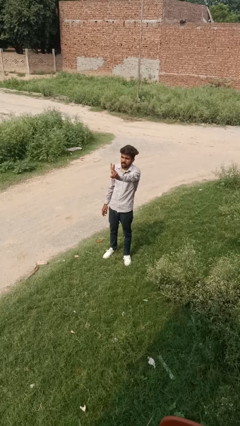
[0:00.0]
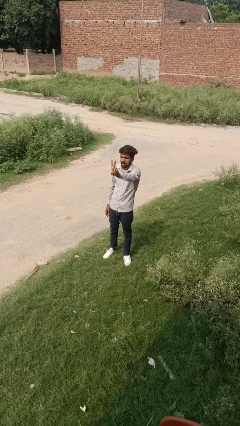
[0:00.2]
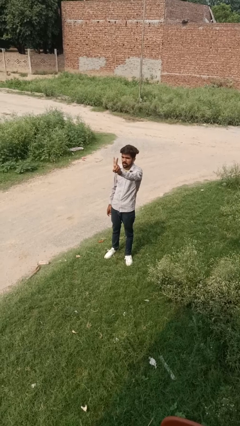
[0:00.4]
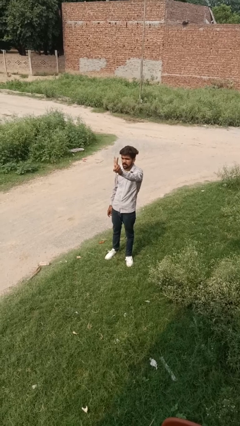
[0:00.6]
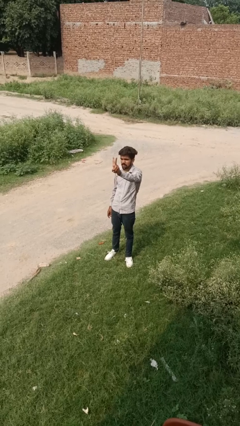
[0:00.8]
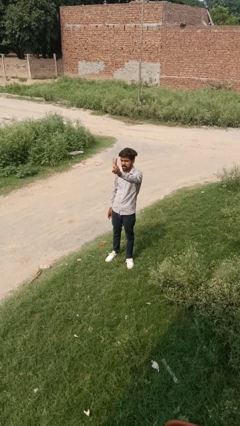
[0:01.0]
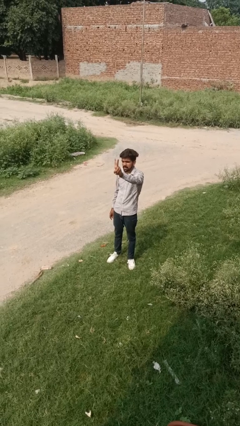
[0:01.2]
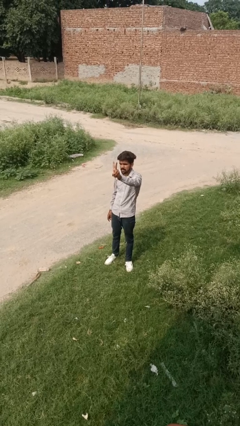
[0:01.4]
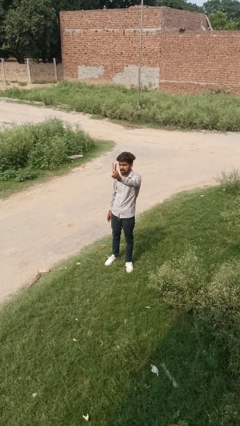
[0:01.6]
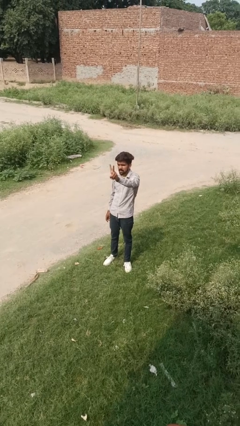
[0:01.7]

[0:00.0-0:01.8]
person gestures peace

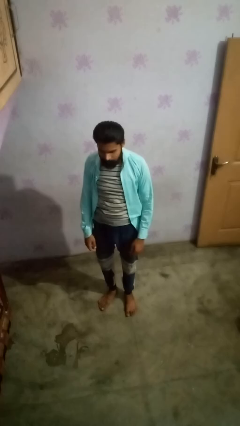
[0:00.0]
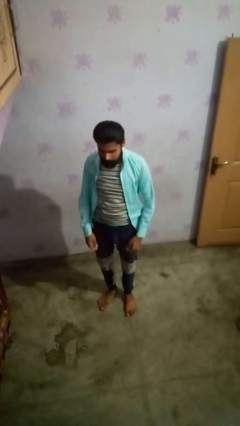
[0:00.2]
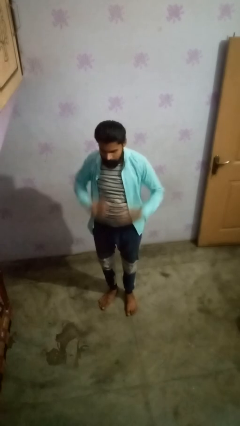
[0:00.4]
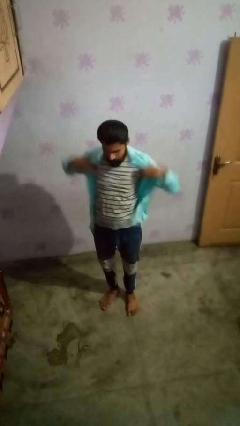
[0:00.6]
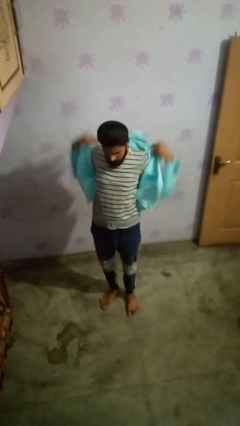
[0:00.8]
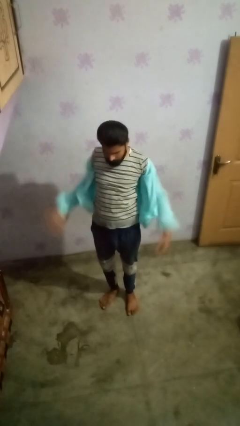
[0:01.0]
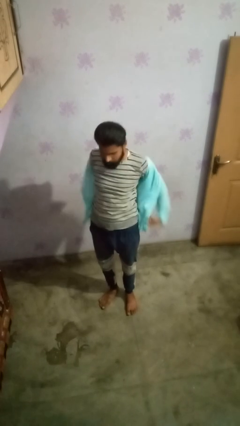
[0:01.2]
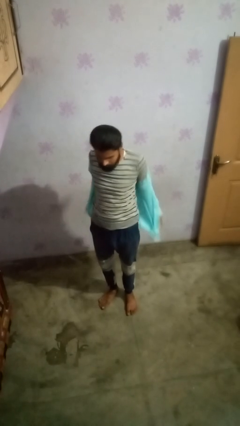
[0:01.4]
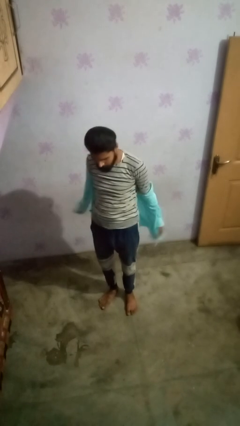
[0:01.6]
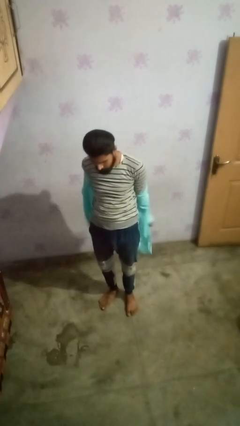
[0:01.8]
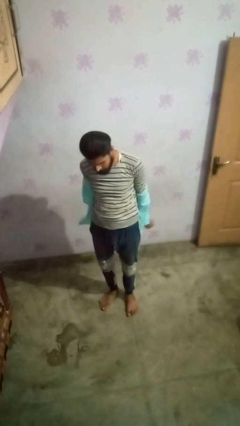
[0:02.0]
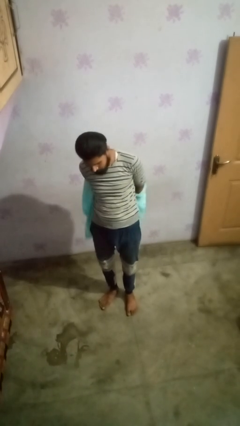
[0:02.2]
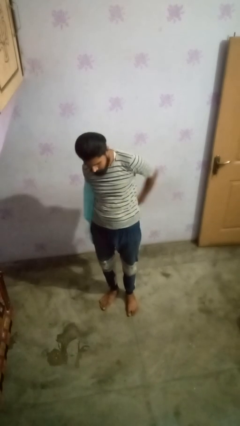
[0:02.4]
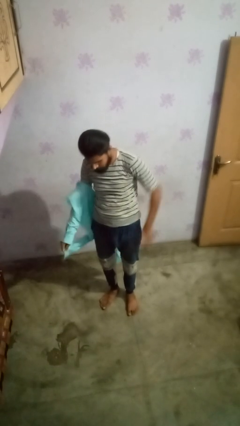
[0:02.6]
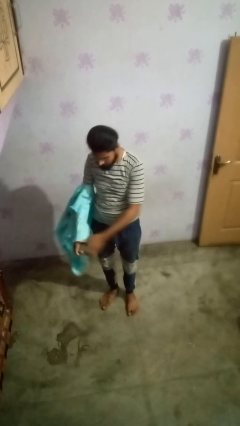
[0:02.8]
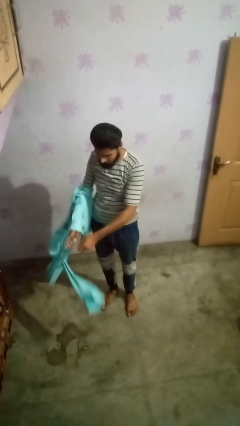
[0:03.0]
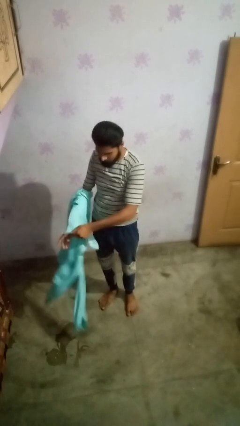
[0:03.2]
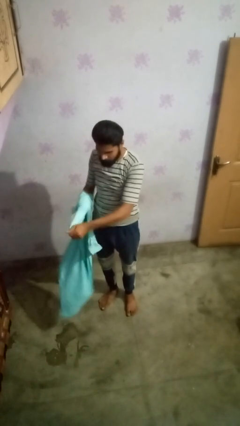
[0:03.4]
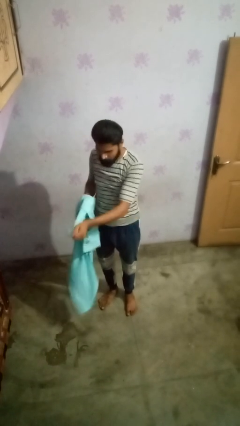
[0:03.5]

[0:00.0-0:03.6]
person takes off shirt

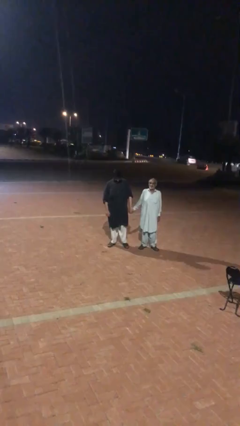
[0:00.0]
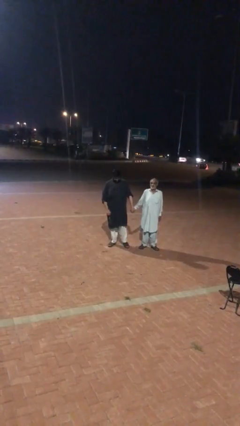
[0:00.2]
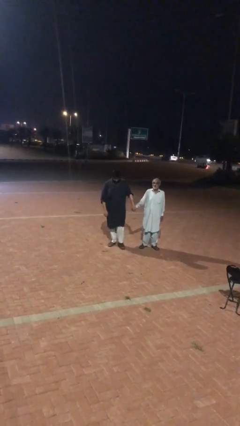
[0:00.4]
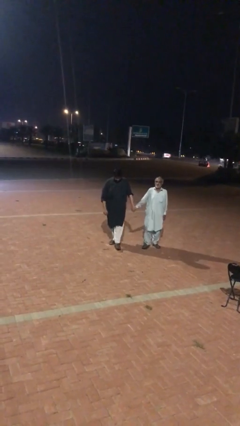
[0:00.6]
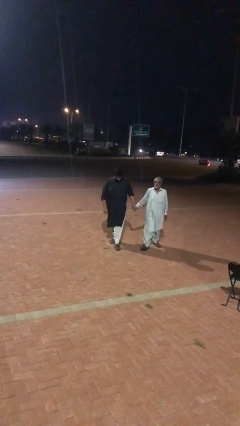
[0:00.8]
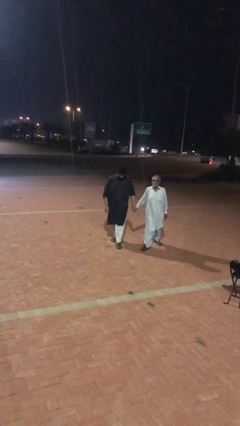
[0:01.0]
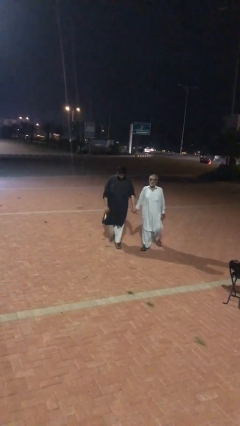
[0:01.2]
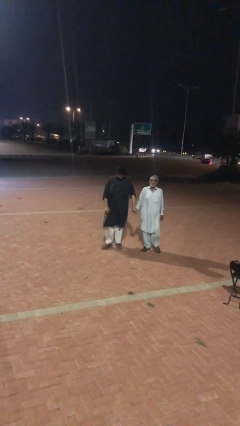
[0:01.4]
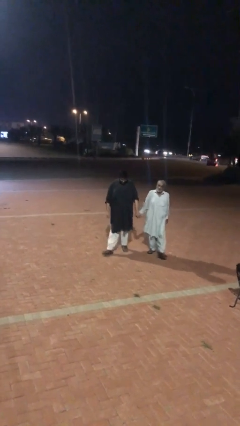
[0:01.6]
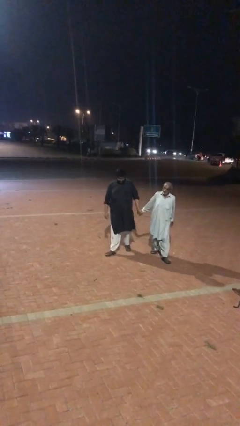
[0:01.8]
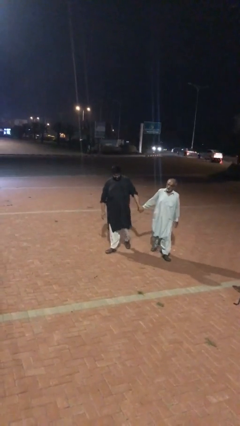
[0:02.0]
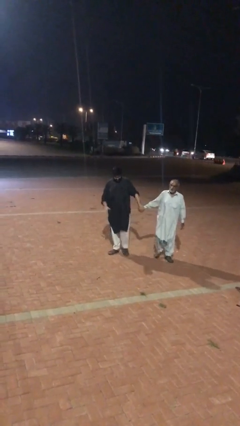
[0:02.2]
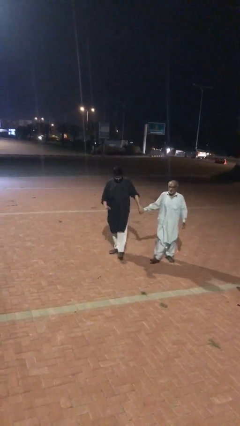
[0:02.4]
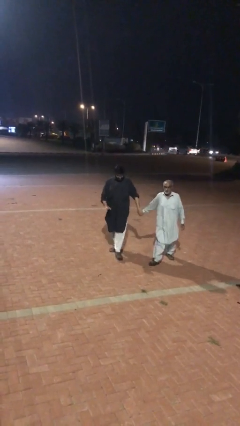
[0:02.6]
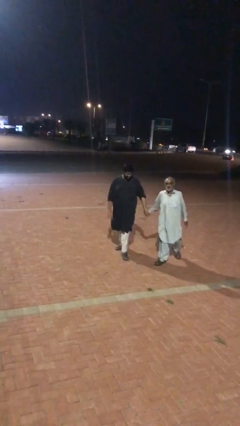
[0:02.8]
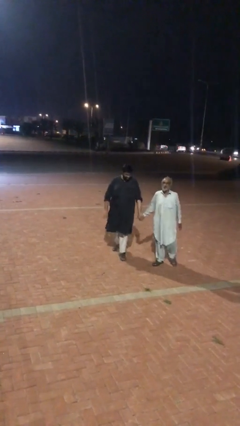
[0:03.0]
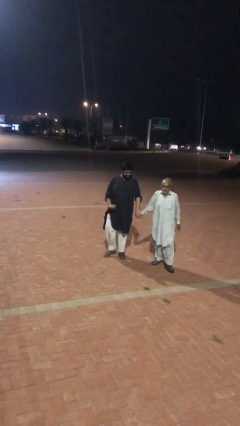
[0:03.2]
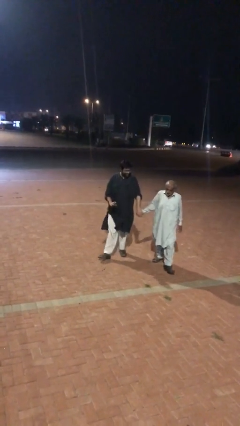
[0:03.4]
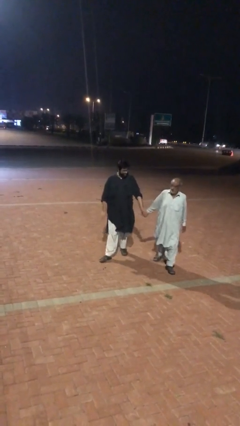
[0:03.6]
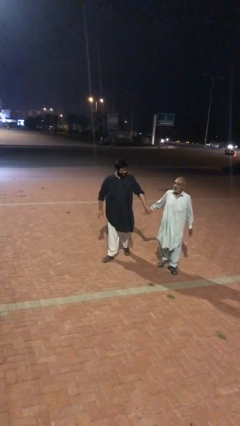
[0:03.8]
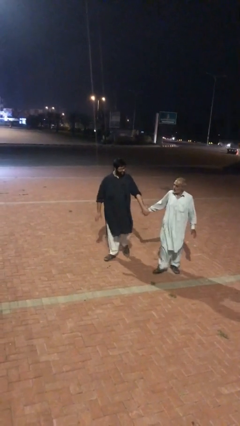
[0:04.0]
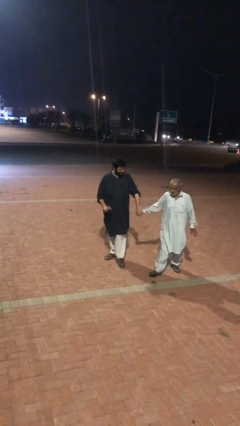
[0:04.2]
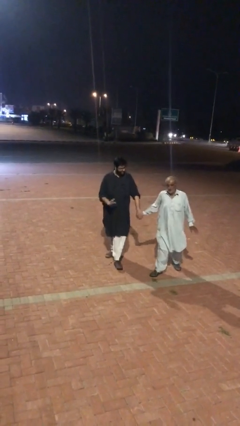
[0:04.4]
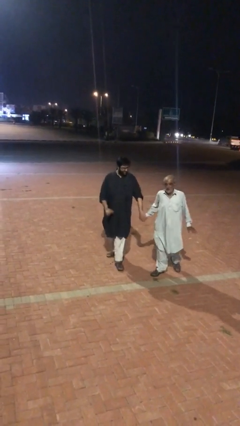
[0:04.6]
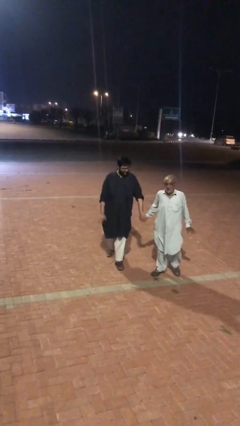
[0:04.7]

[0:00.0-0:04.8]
person holds hand

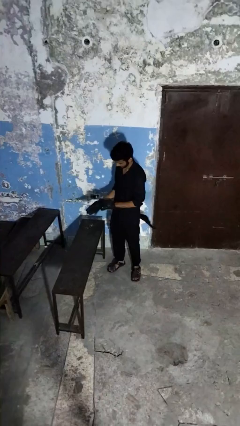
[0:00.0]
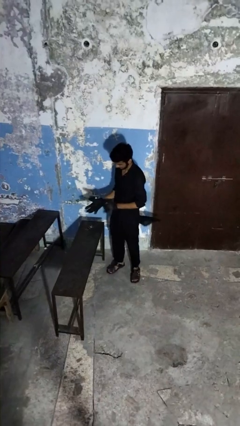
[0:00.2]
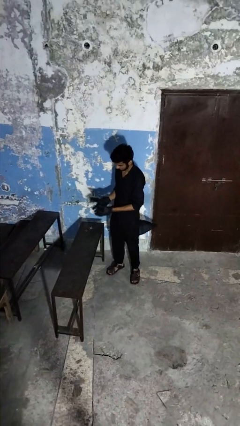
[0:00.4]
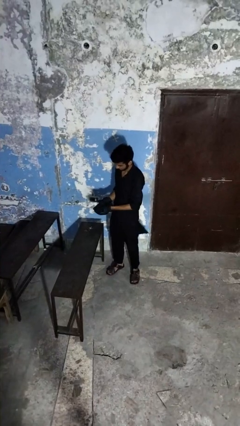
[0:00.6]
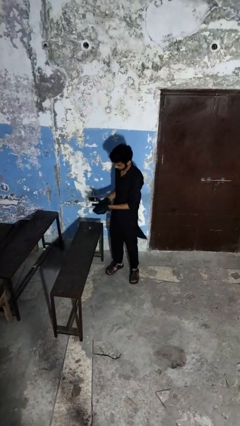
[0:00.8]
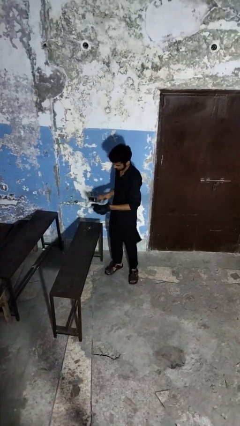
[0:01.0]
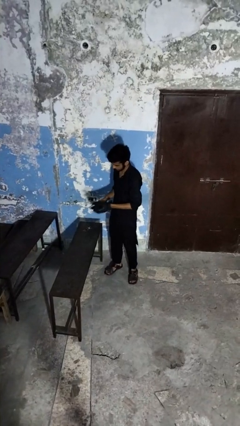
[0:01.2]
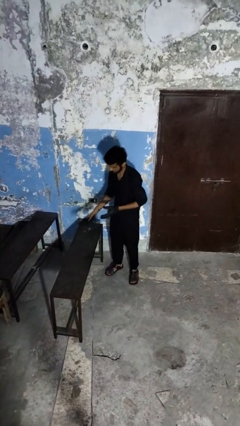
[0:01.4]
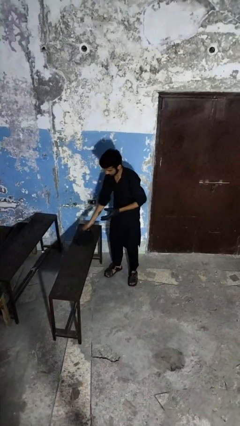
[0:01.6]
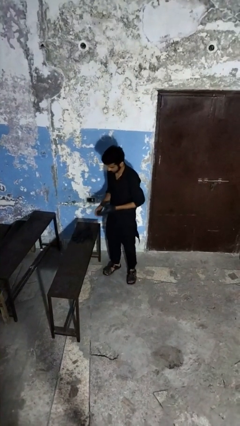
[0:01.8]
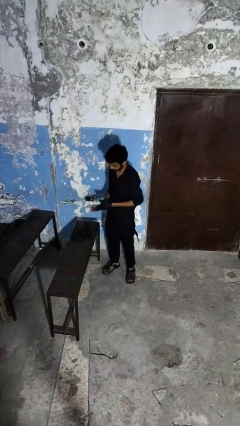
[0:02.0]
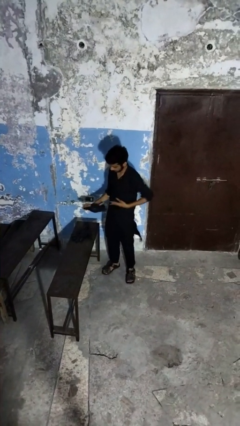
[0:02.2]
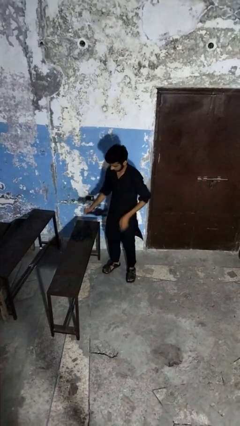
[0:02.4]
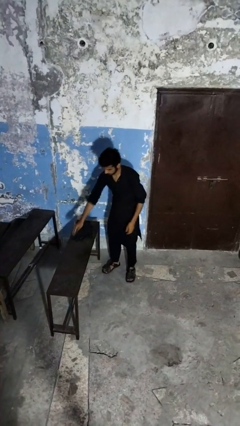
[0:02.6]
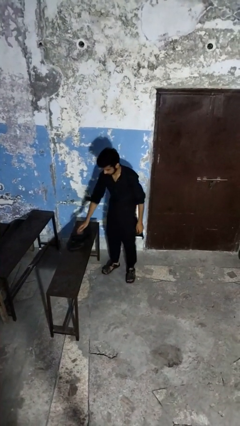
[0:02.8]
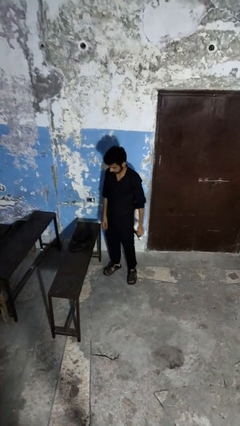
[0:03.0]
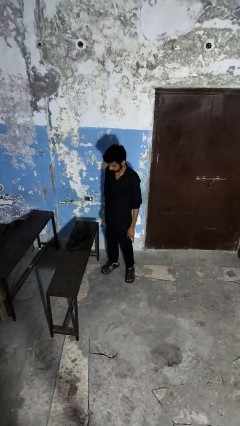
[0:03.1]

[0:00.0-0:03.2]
person takes off gloves

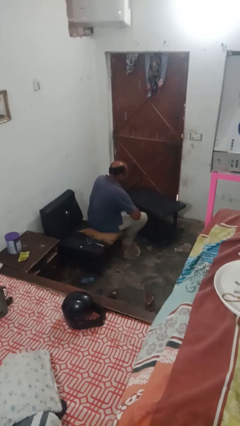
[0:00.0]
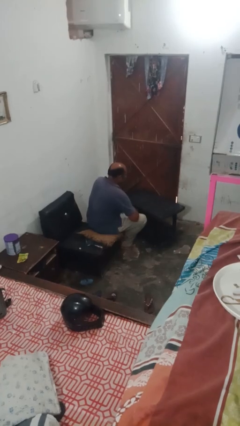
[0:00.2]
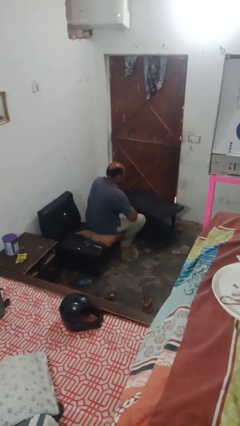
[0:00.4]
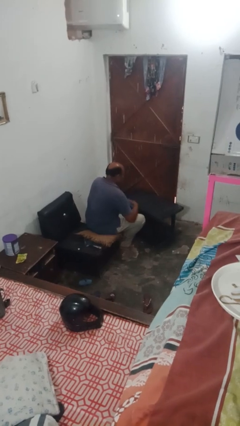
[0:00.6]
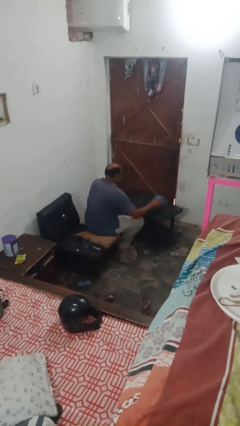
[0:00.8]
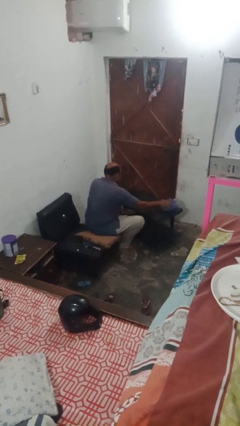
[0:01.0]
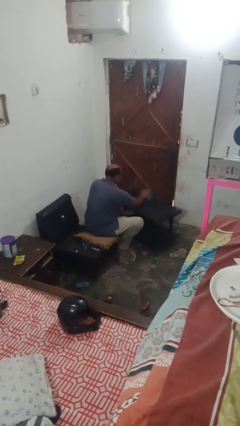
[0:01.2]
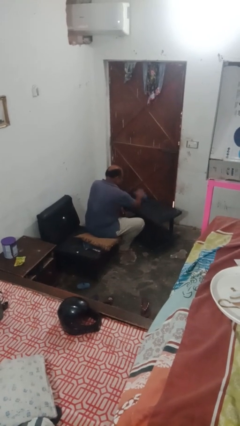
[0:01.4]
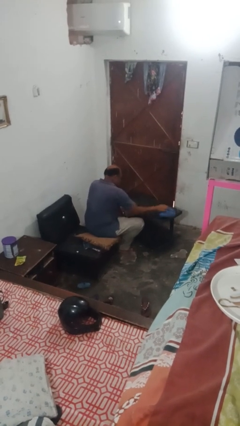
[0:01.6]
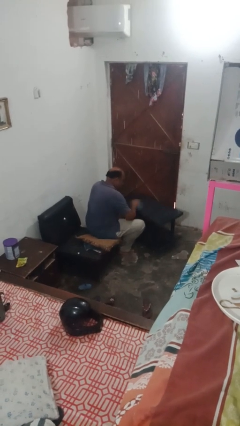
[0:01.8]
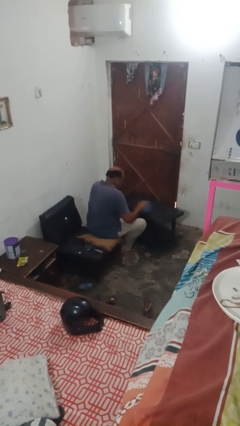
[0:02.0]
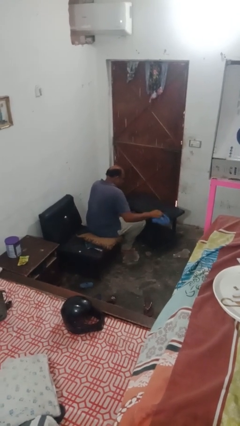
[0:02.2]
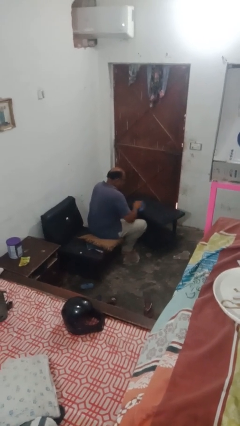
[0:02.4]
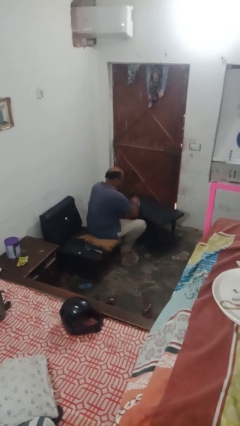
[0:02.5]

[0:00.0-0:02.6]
person cleans table with rag

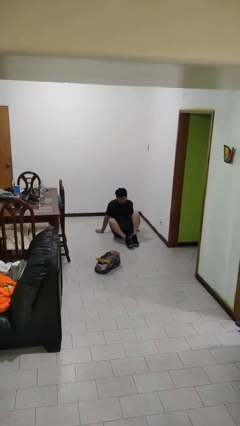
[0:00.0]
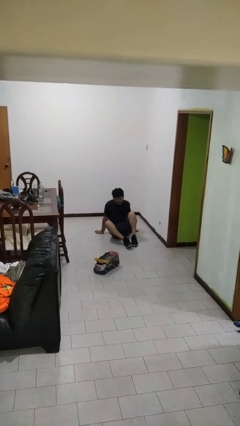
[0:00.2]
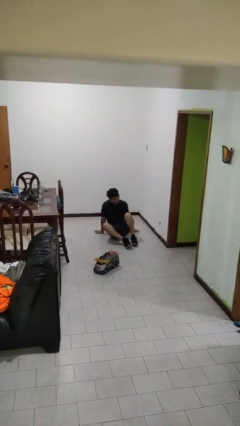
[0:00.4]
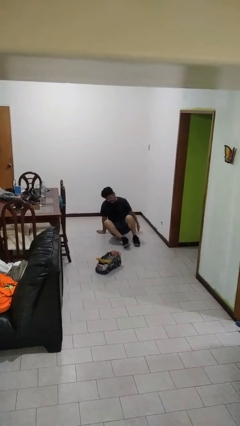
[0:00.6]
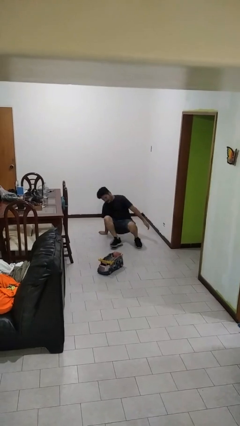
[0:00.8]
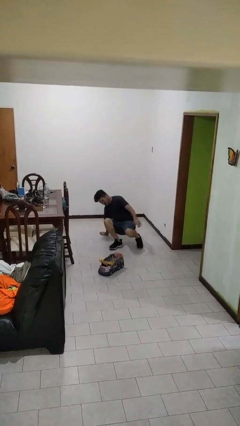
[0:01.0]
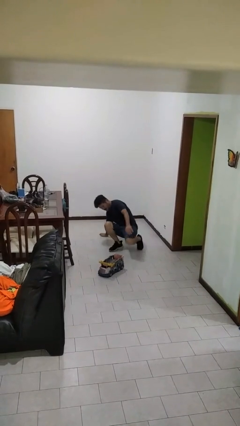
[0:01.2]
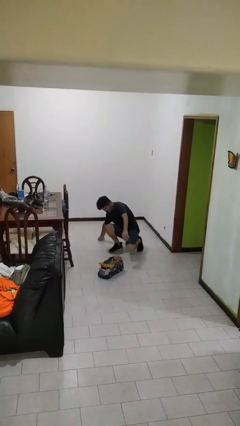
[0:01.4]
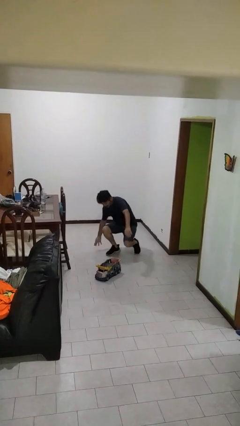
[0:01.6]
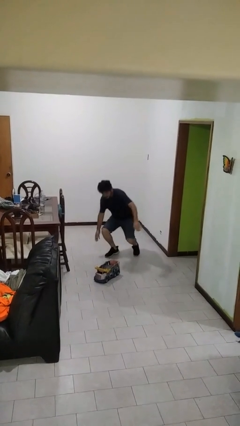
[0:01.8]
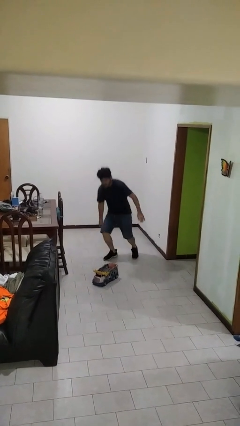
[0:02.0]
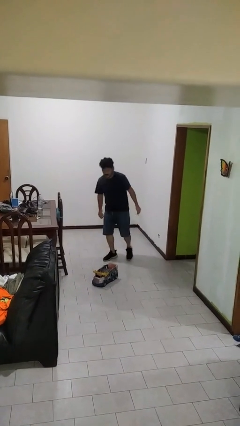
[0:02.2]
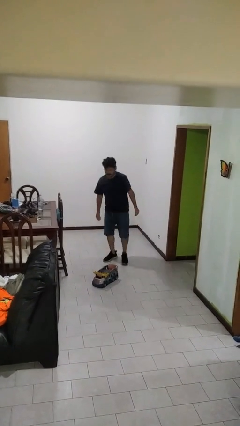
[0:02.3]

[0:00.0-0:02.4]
person stands up from floor
